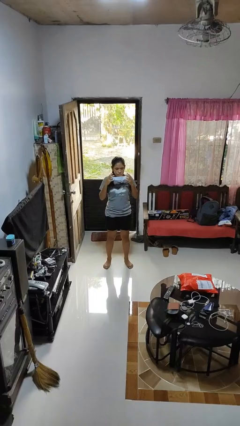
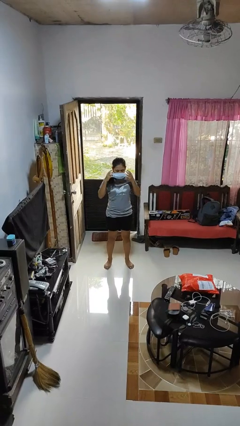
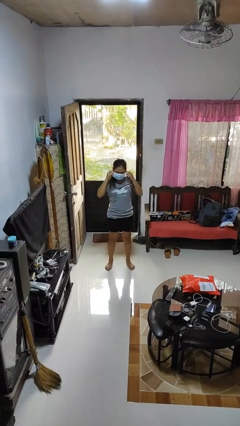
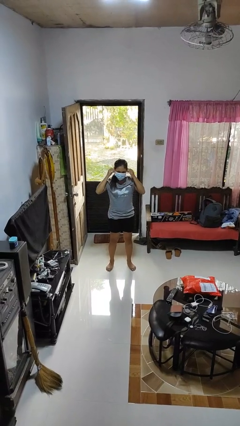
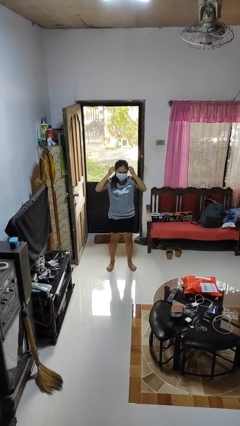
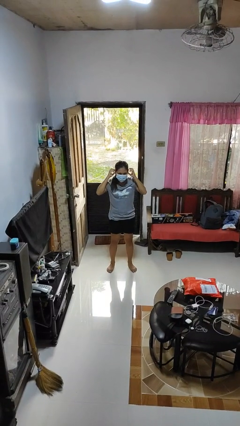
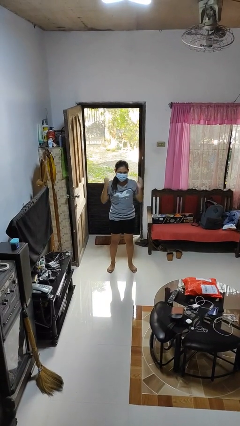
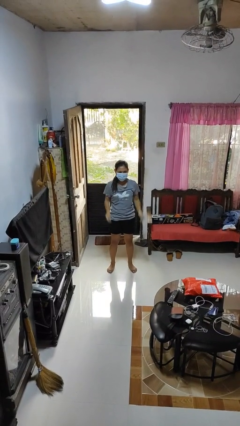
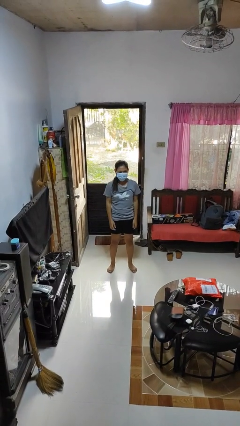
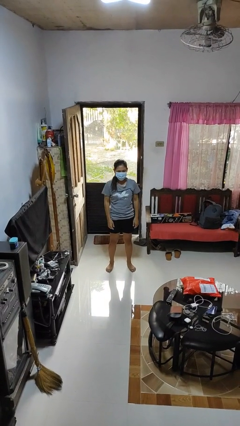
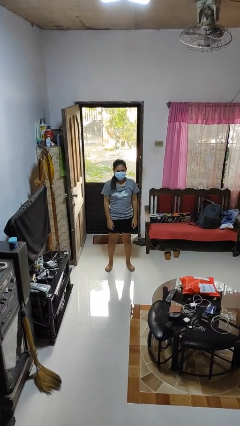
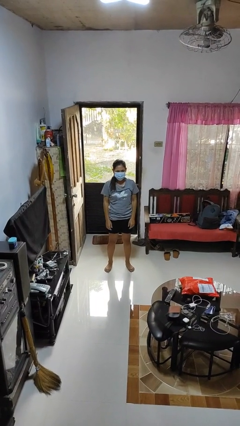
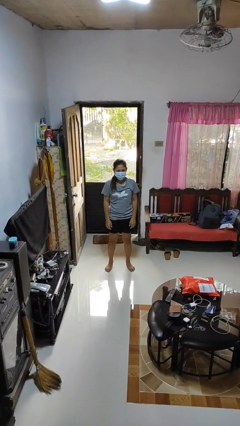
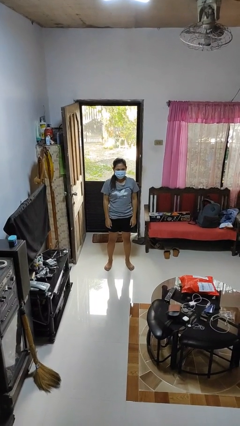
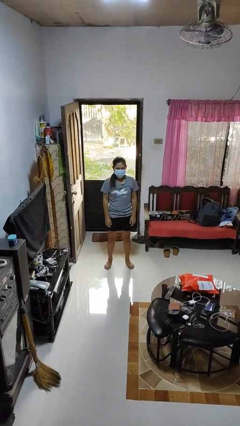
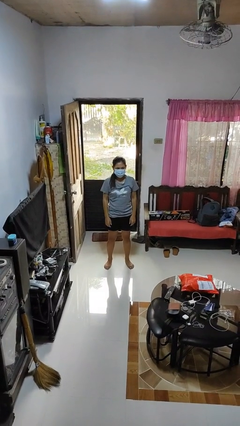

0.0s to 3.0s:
person puts on facemask

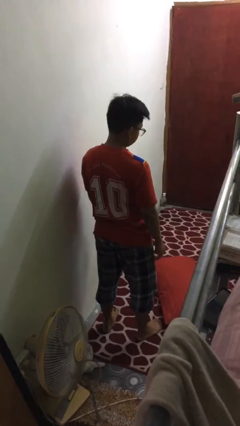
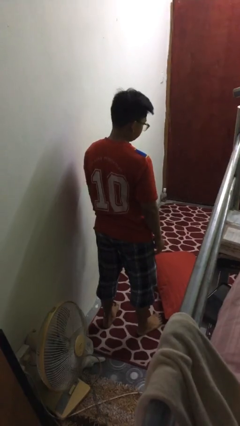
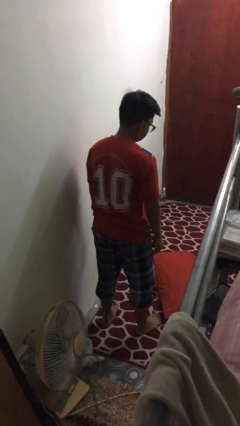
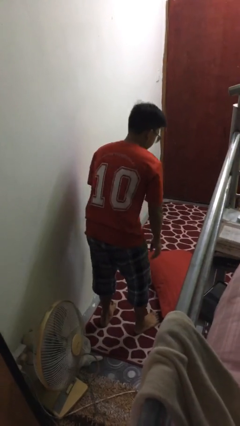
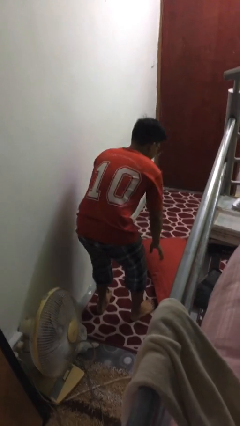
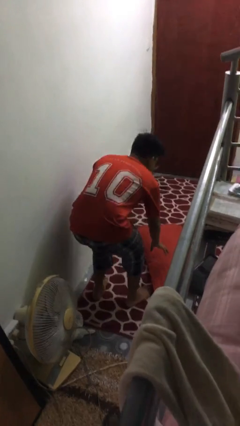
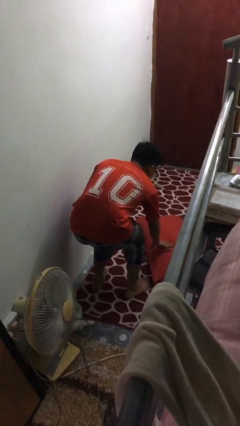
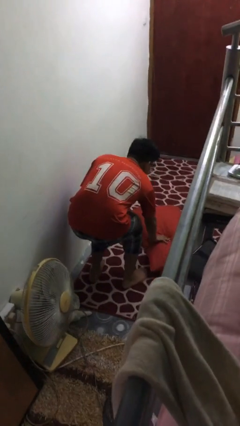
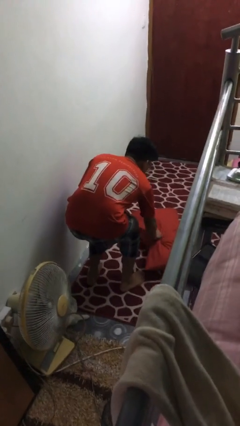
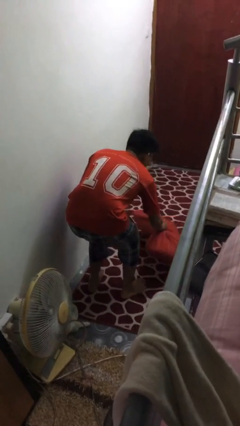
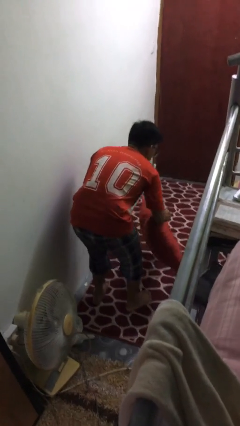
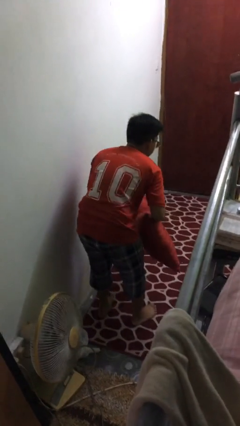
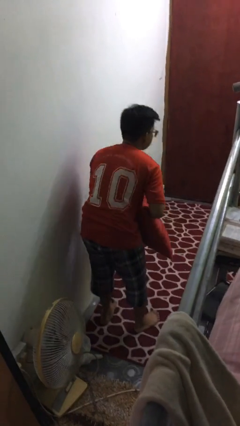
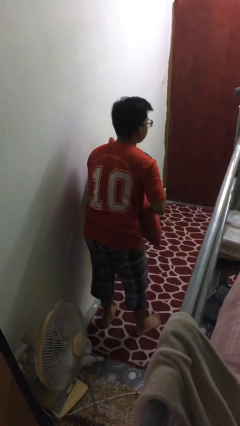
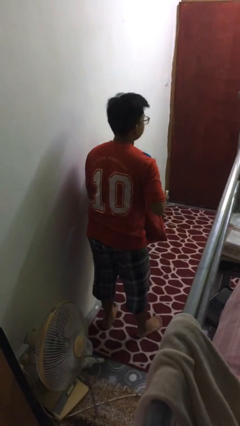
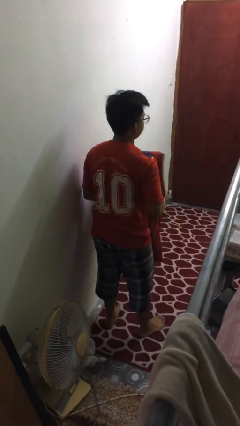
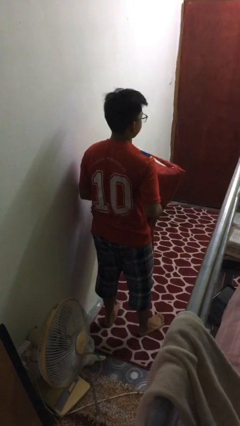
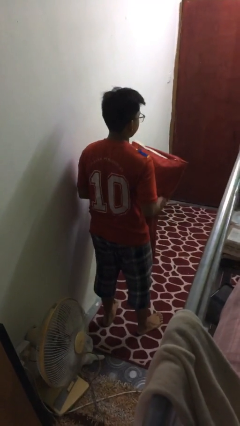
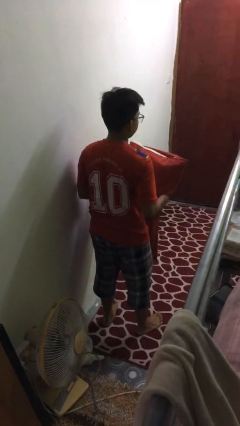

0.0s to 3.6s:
person picks up object from floor

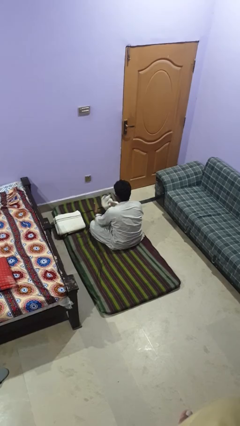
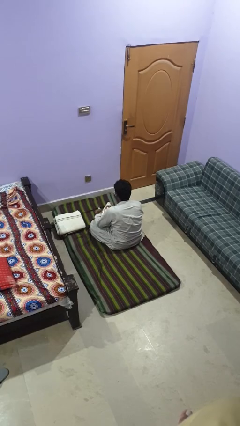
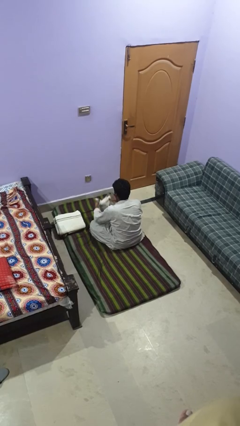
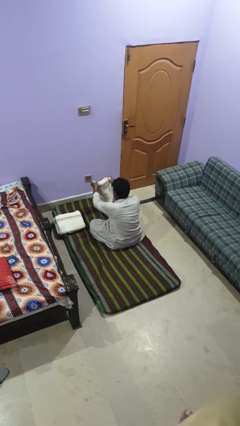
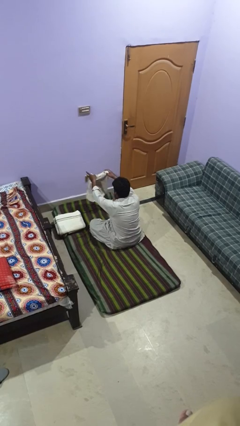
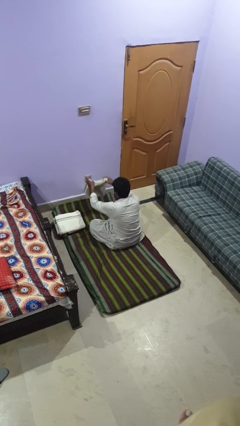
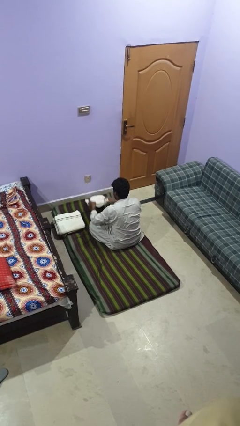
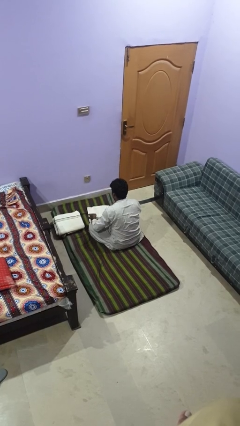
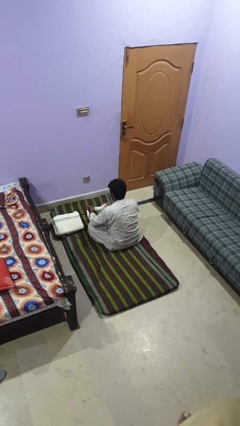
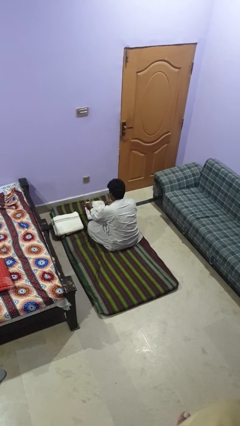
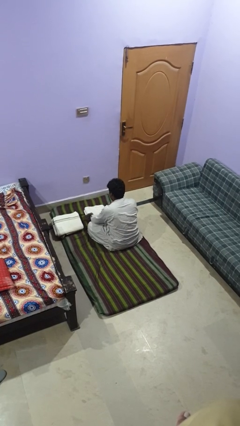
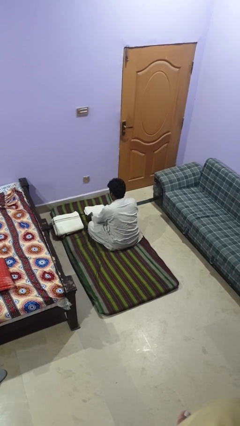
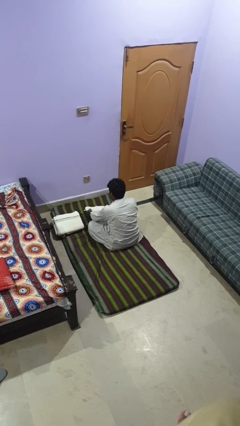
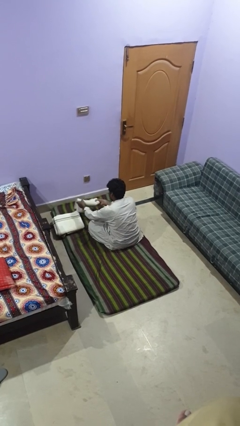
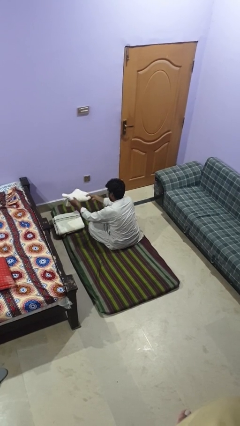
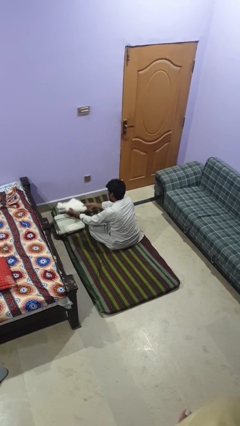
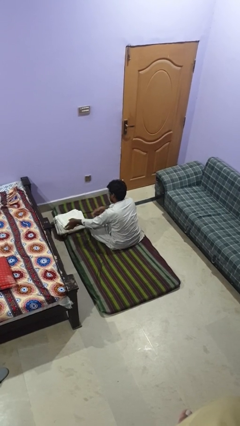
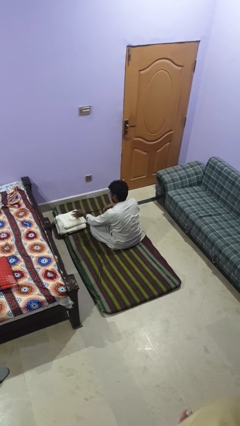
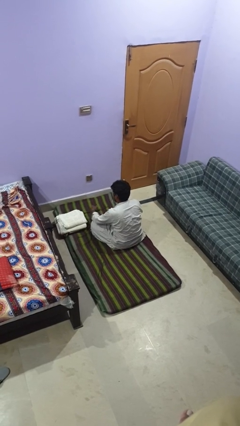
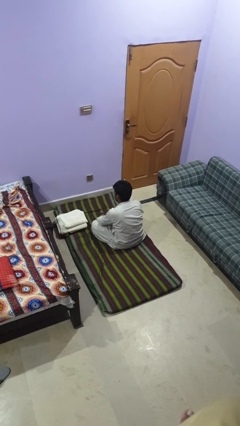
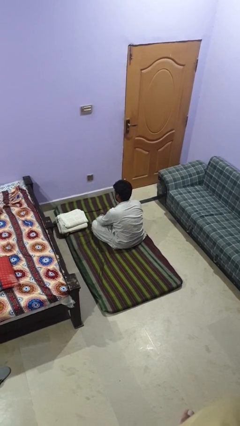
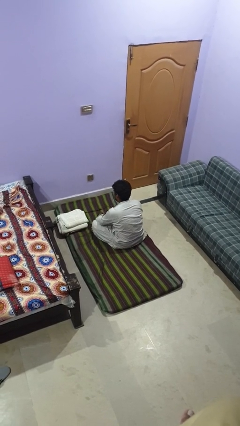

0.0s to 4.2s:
person folds towel

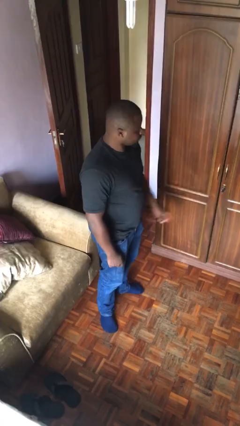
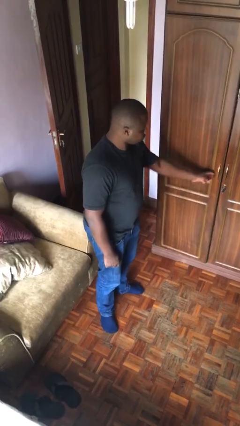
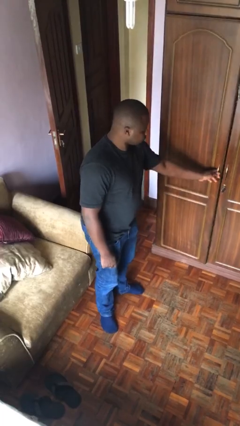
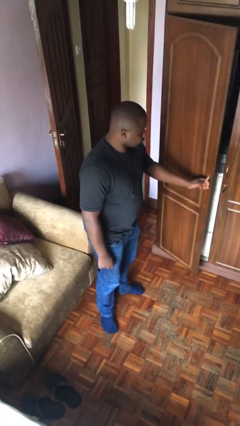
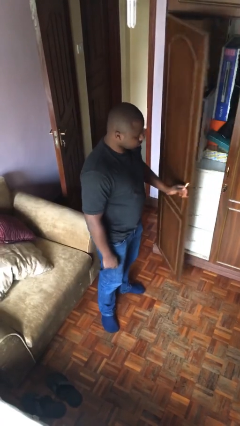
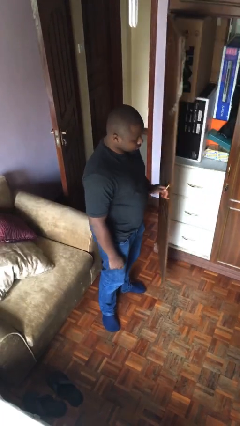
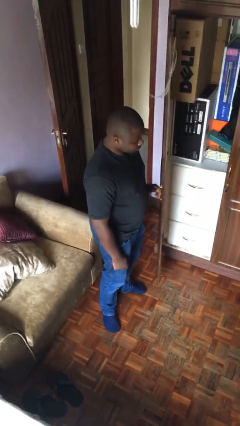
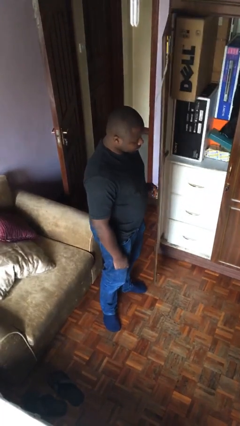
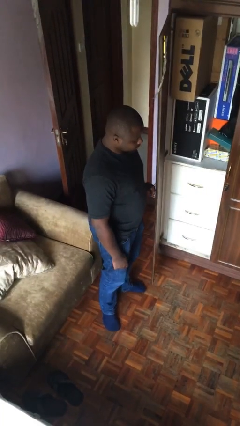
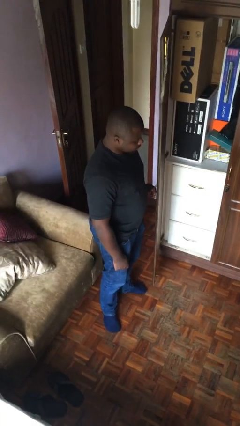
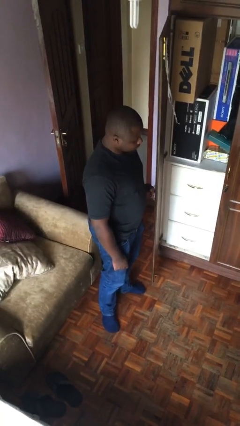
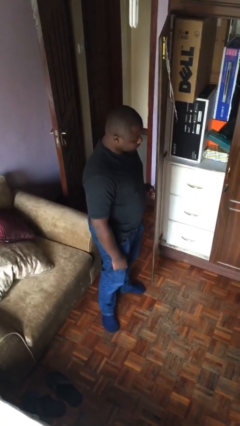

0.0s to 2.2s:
person opens dresser drawer

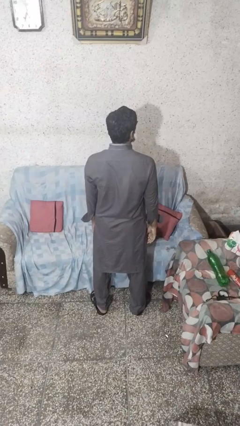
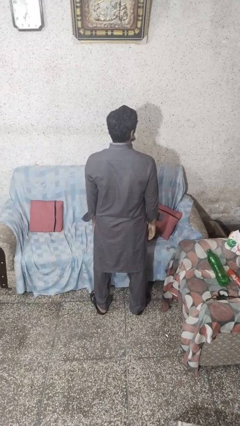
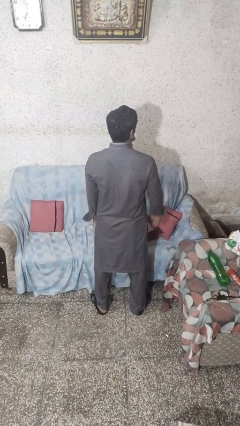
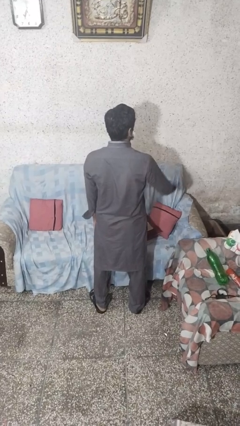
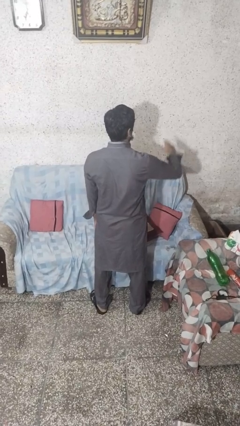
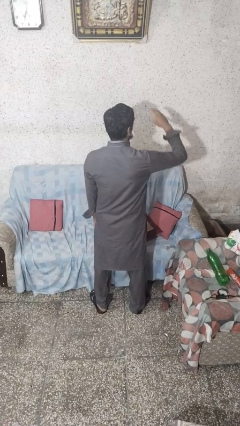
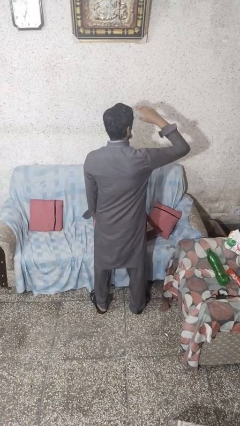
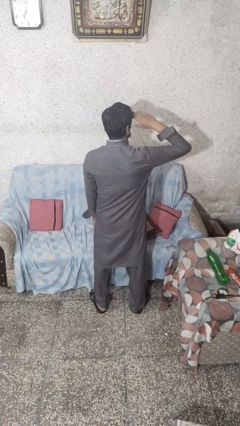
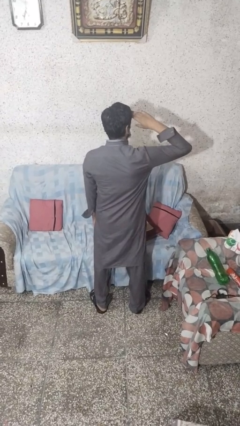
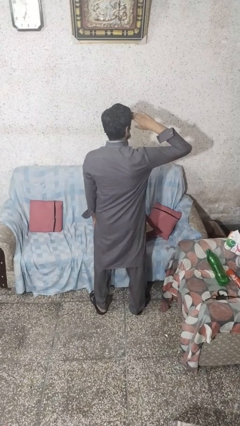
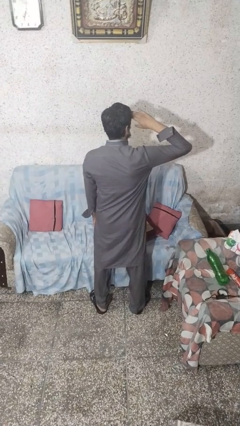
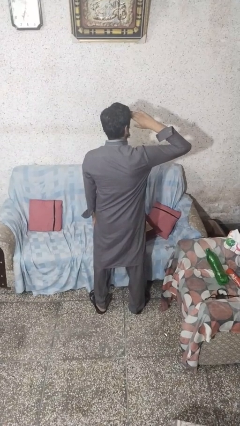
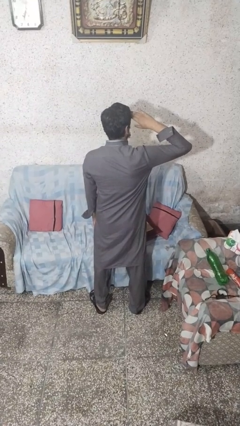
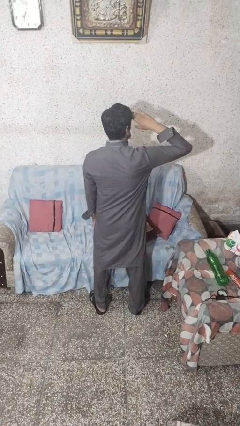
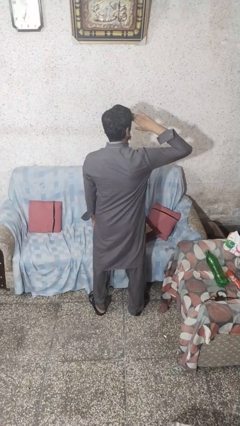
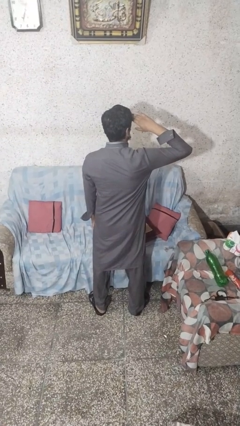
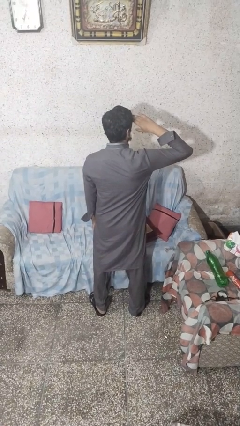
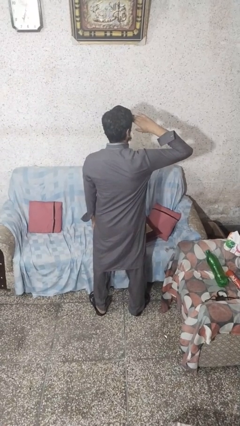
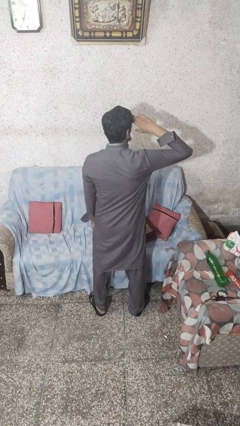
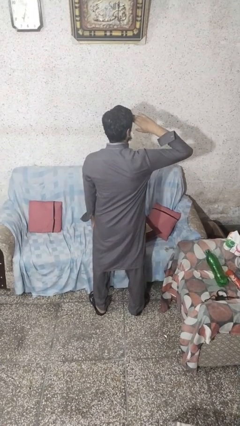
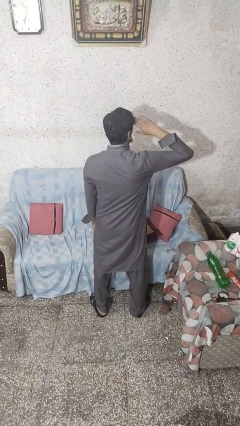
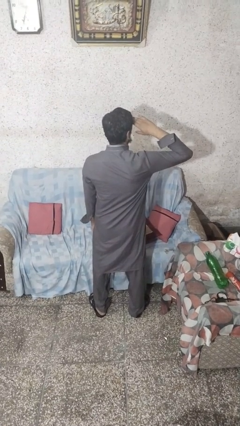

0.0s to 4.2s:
person salutes

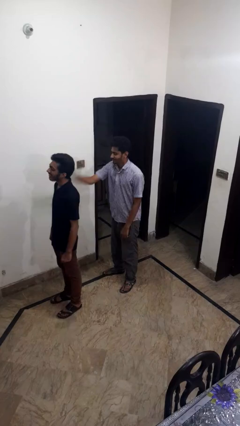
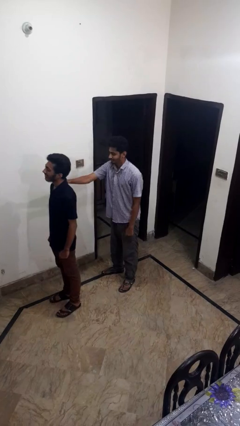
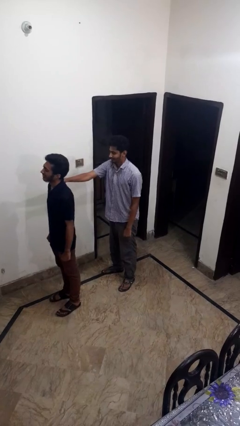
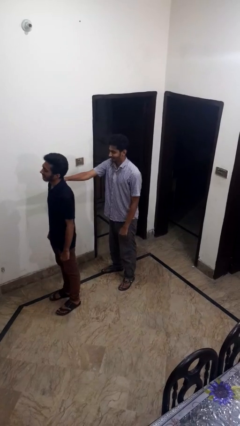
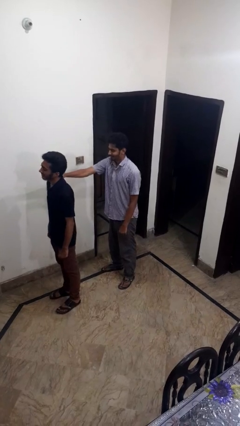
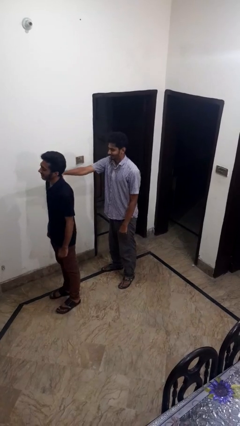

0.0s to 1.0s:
person grabs person by shoulder
